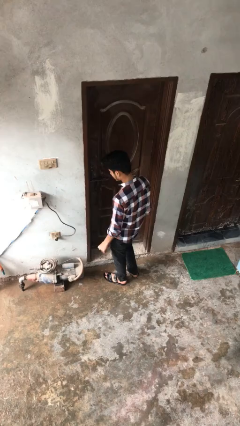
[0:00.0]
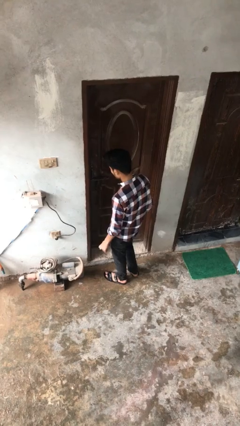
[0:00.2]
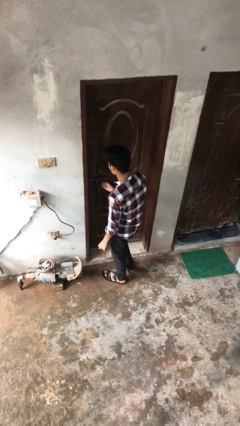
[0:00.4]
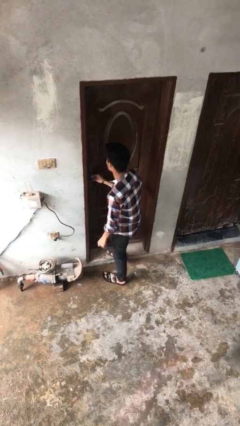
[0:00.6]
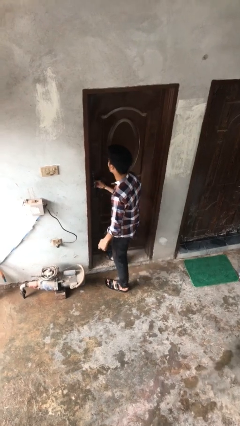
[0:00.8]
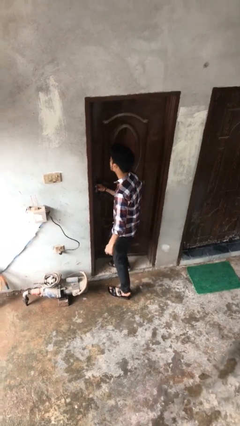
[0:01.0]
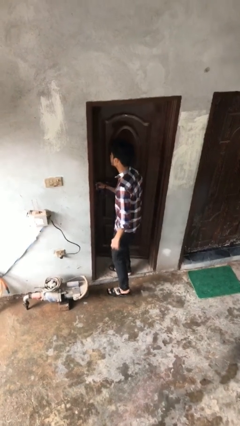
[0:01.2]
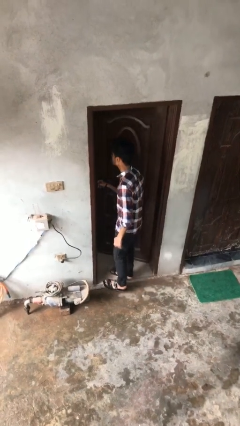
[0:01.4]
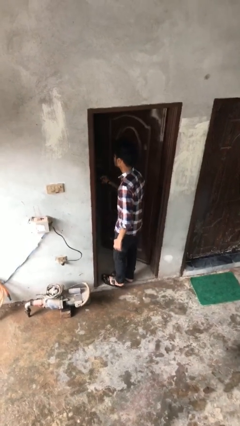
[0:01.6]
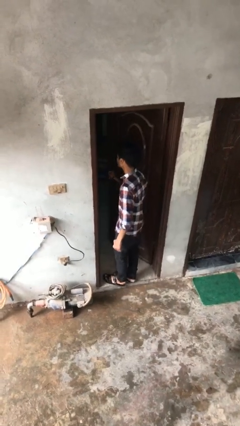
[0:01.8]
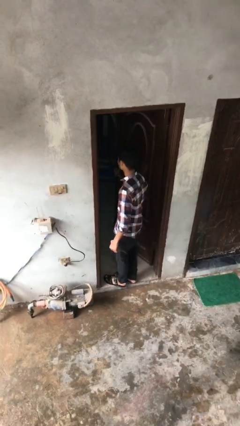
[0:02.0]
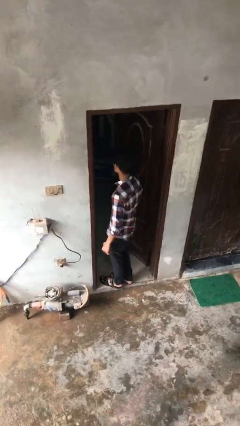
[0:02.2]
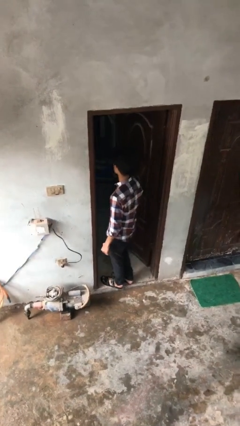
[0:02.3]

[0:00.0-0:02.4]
person opens facility door

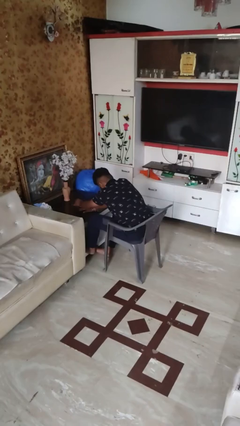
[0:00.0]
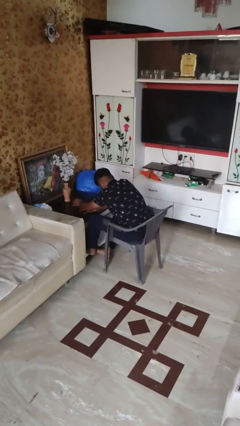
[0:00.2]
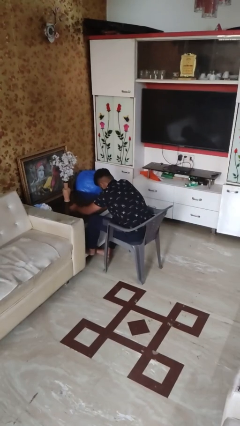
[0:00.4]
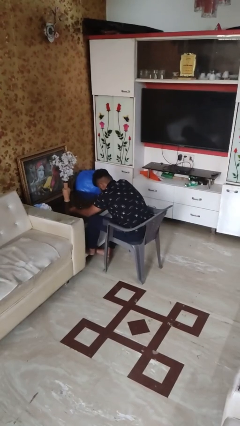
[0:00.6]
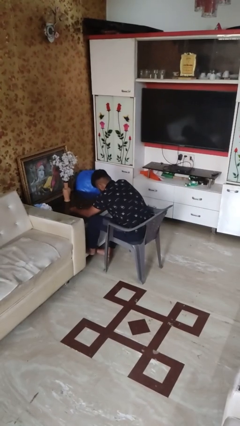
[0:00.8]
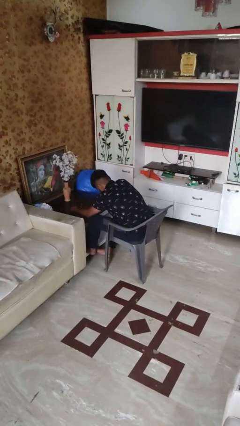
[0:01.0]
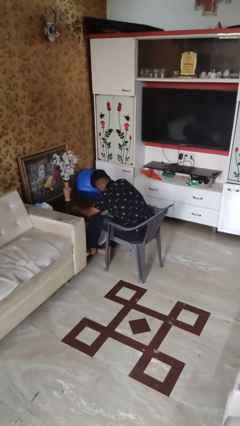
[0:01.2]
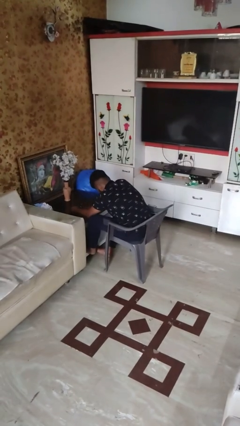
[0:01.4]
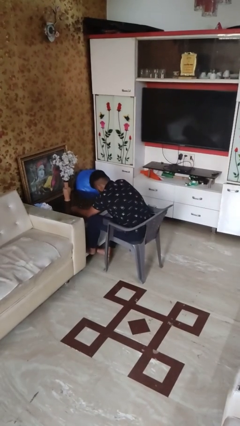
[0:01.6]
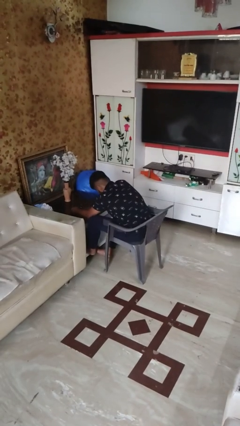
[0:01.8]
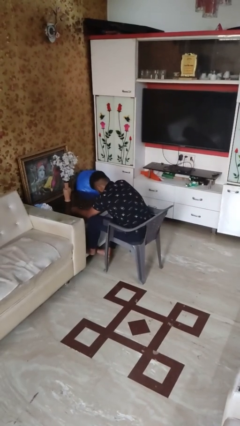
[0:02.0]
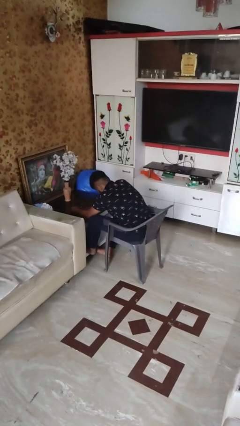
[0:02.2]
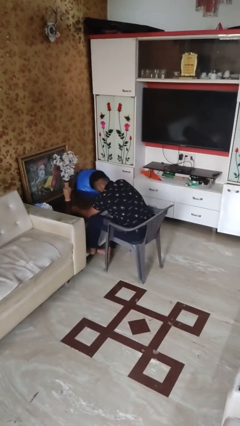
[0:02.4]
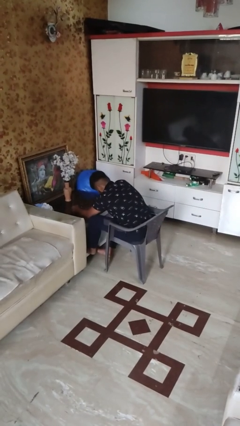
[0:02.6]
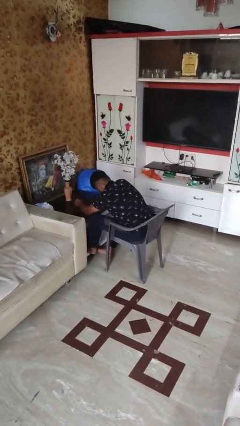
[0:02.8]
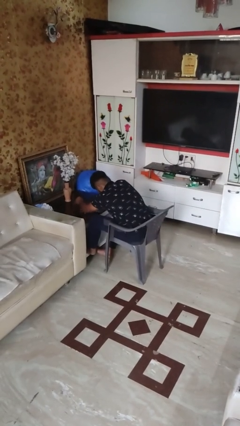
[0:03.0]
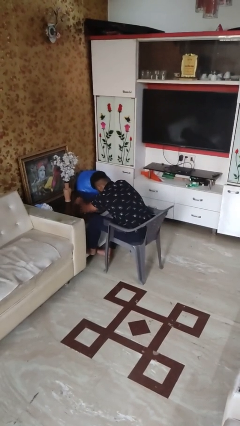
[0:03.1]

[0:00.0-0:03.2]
person paints fingernails

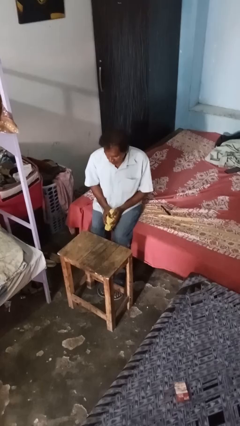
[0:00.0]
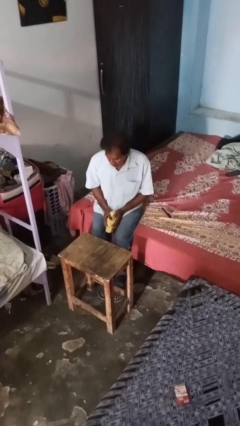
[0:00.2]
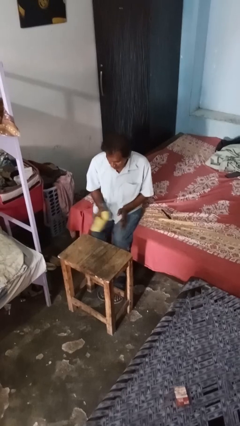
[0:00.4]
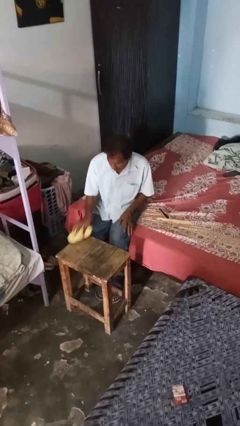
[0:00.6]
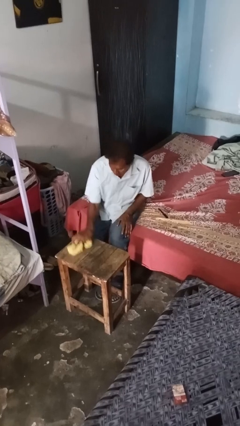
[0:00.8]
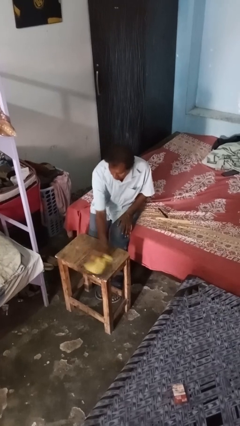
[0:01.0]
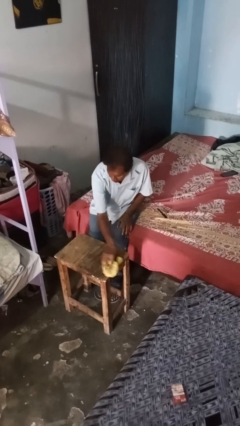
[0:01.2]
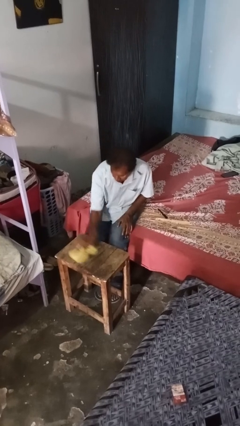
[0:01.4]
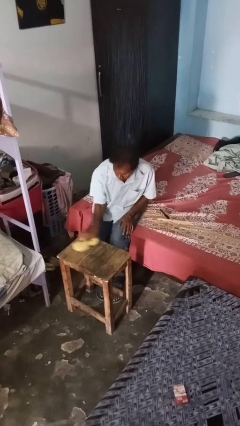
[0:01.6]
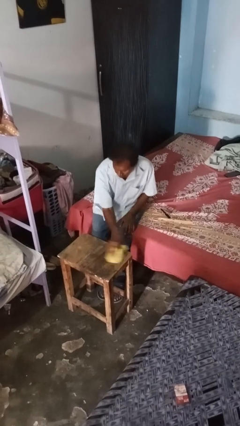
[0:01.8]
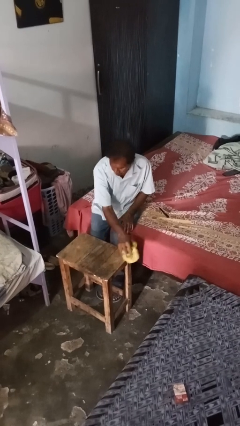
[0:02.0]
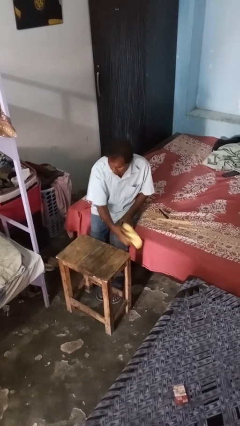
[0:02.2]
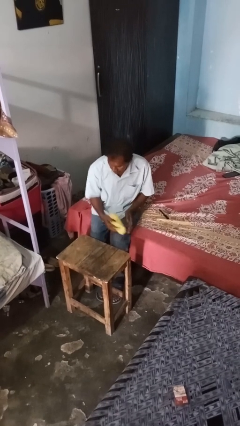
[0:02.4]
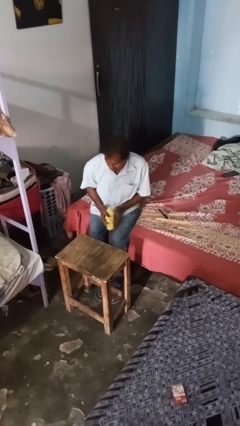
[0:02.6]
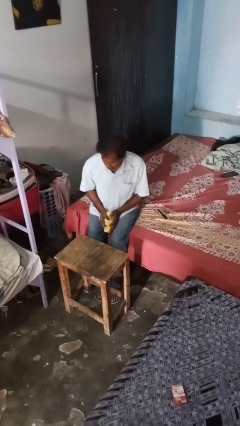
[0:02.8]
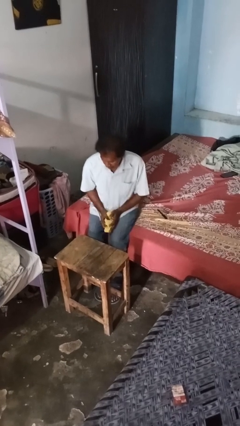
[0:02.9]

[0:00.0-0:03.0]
person cleans table with rag

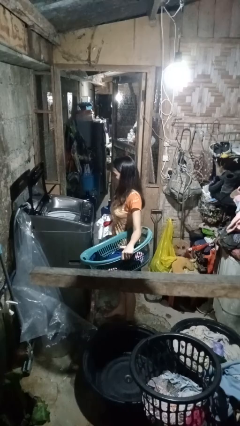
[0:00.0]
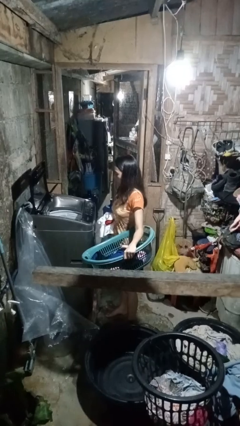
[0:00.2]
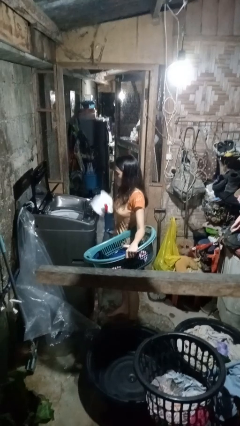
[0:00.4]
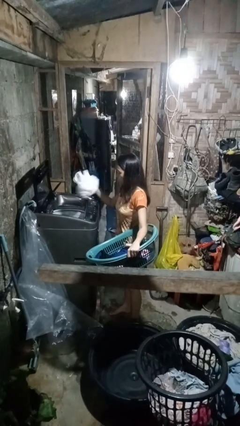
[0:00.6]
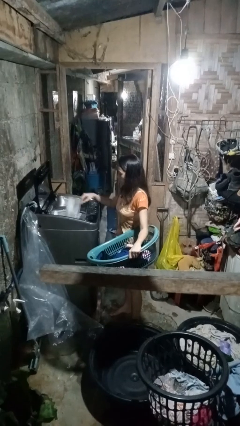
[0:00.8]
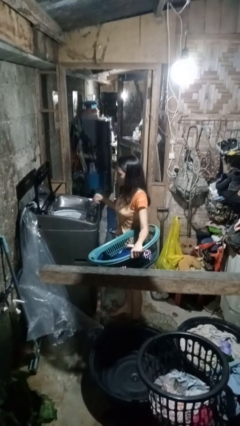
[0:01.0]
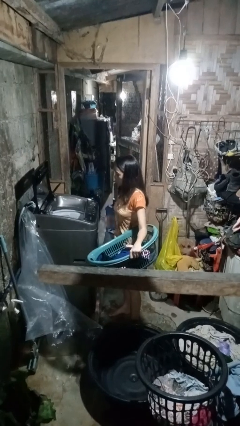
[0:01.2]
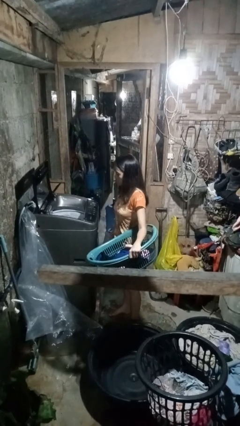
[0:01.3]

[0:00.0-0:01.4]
person loads clotheswasher

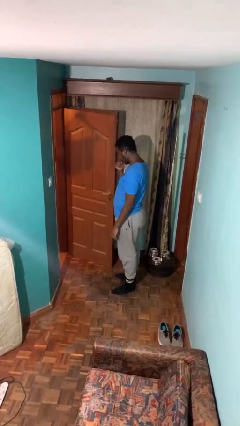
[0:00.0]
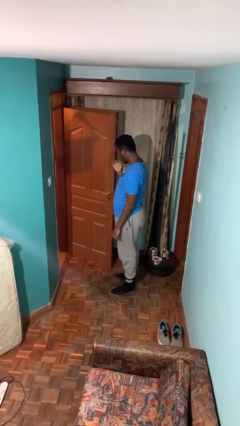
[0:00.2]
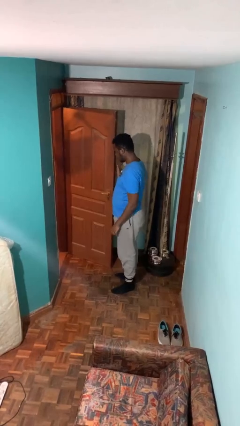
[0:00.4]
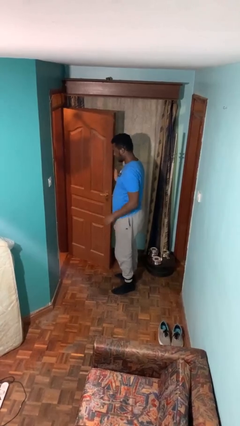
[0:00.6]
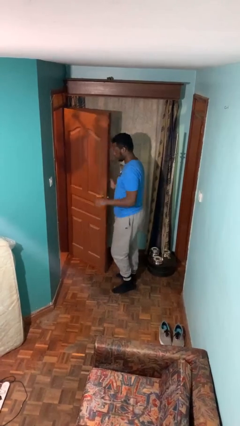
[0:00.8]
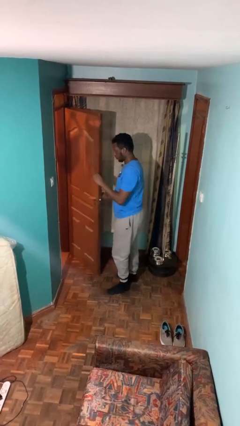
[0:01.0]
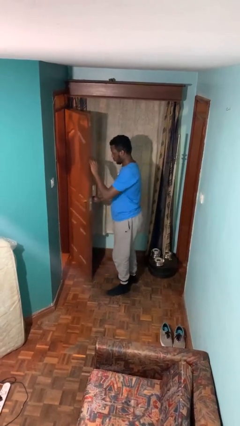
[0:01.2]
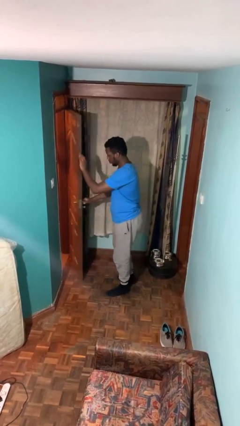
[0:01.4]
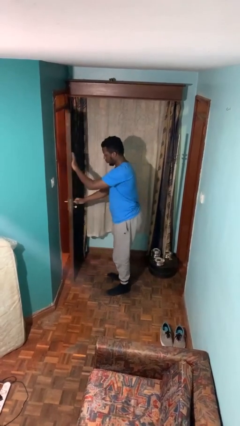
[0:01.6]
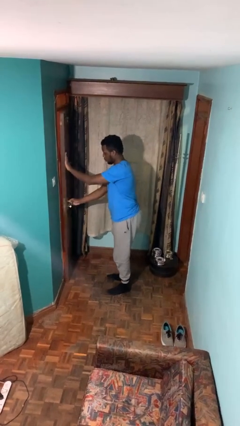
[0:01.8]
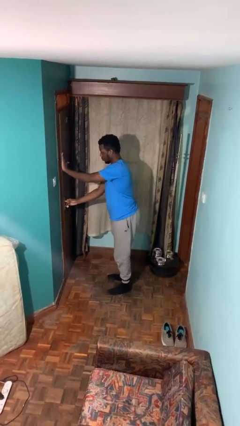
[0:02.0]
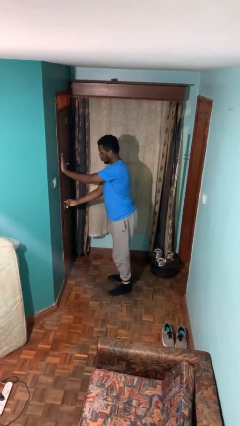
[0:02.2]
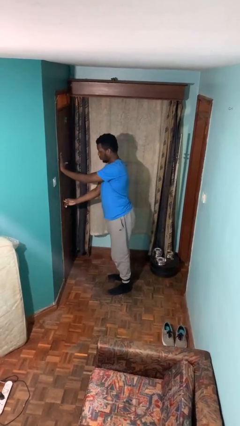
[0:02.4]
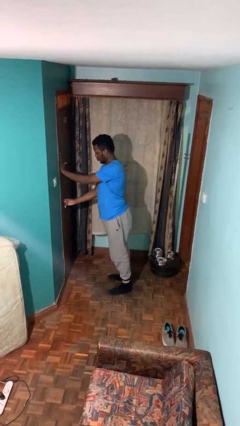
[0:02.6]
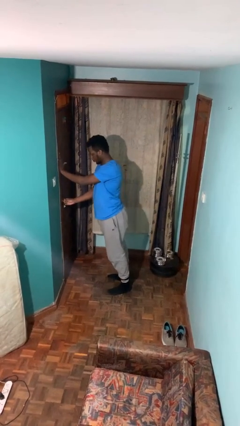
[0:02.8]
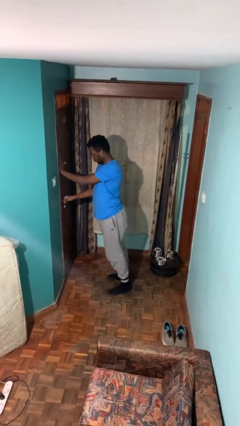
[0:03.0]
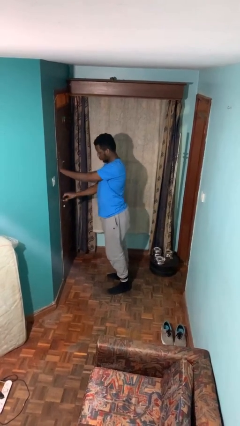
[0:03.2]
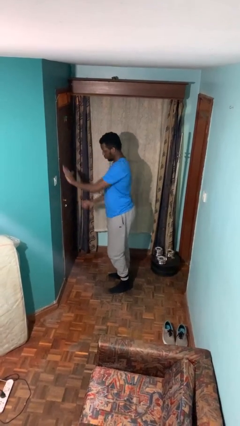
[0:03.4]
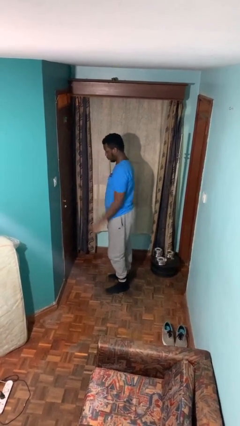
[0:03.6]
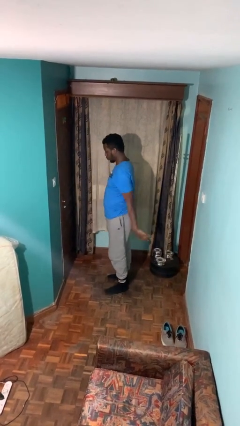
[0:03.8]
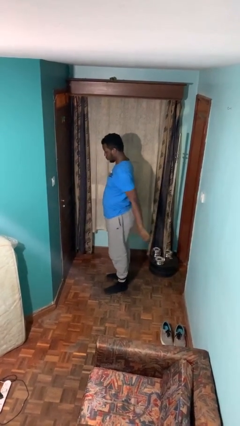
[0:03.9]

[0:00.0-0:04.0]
person closes facility door

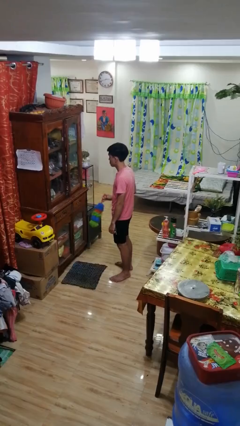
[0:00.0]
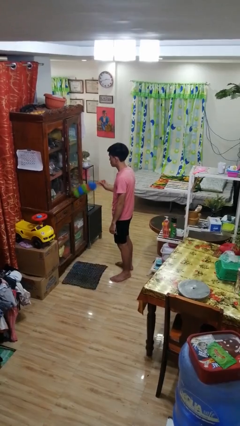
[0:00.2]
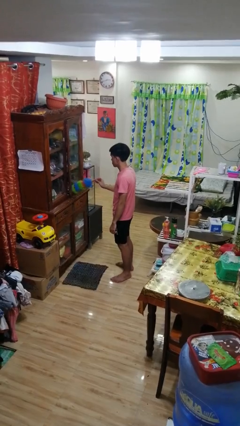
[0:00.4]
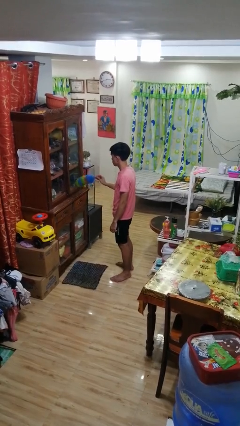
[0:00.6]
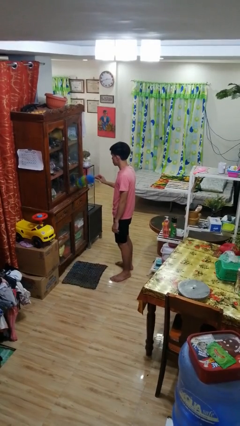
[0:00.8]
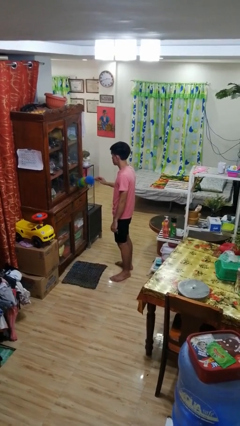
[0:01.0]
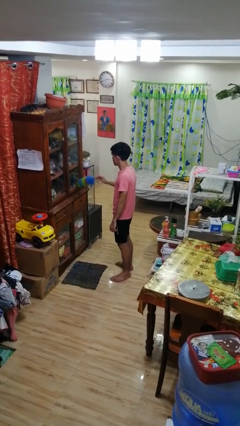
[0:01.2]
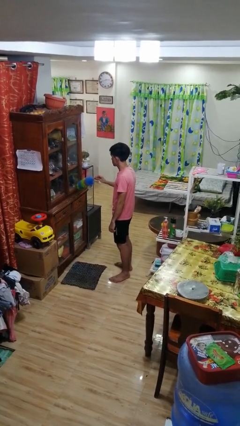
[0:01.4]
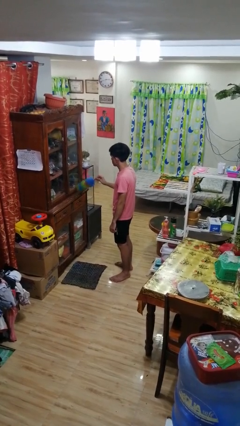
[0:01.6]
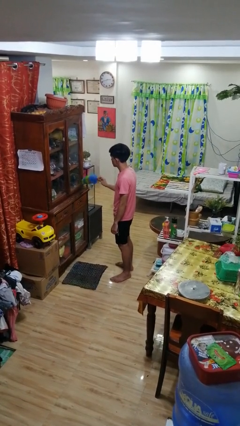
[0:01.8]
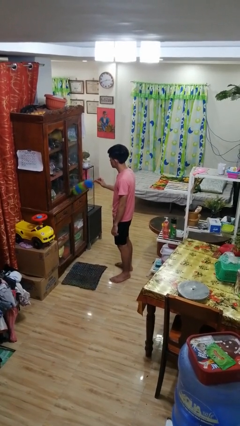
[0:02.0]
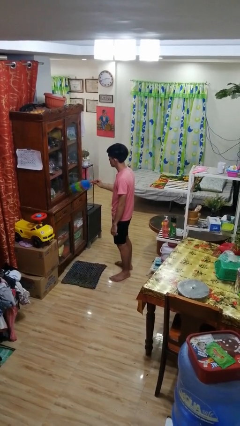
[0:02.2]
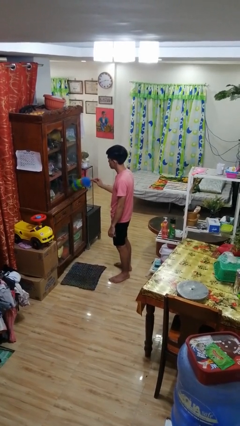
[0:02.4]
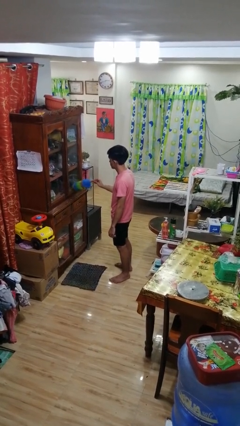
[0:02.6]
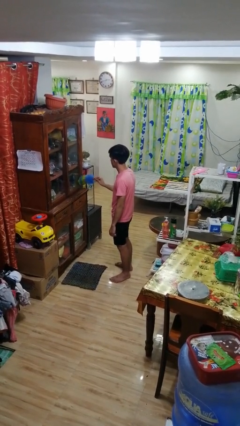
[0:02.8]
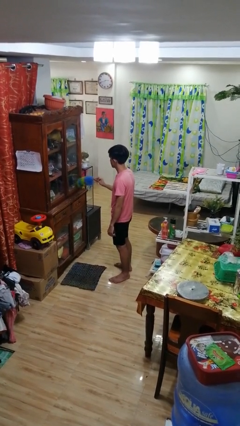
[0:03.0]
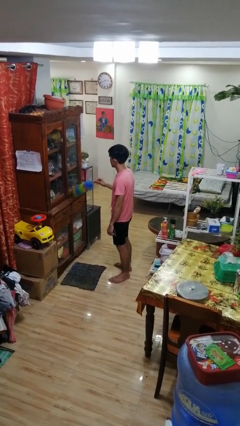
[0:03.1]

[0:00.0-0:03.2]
person dusts furniture

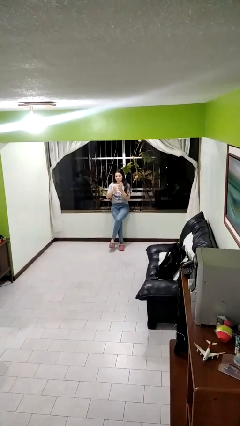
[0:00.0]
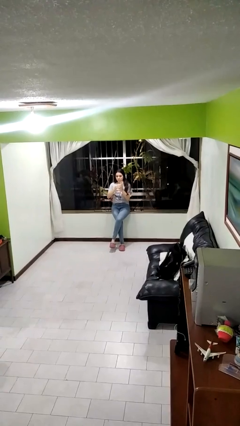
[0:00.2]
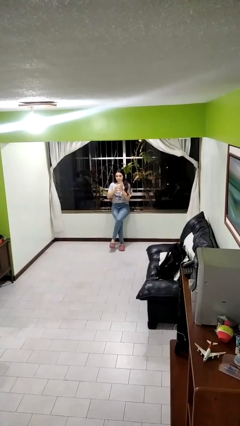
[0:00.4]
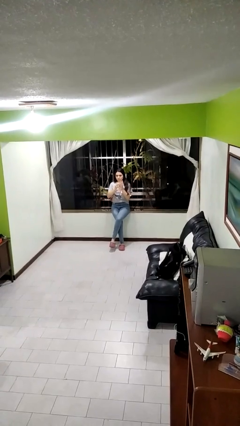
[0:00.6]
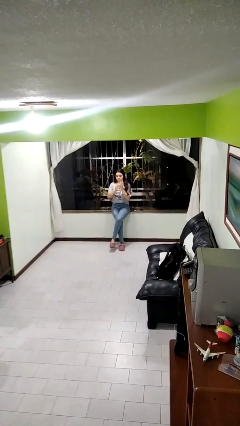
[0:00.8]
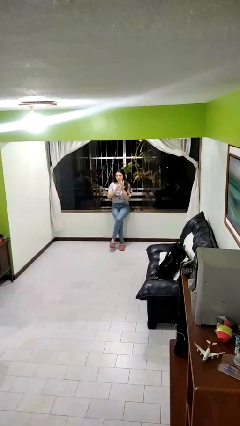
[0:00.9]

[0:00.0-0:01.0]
person puts on ring
